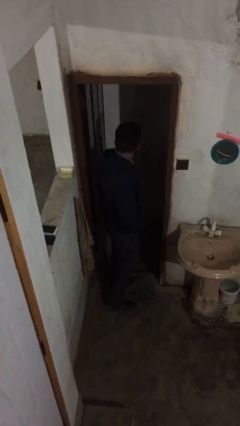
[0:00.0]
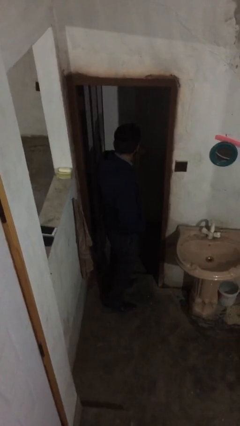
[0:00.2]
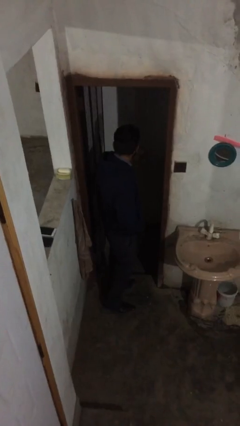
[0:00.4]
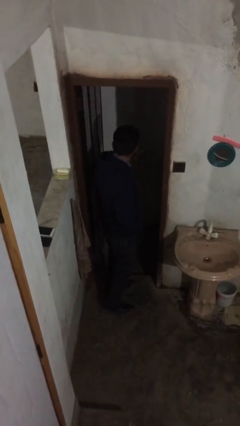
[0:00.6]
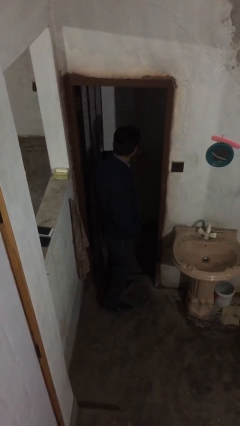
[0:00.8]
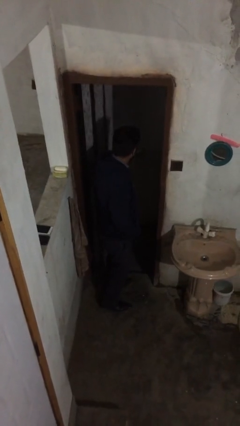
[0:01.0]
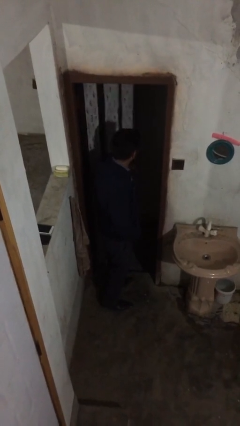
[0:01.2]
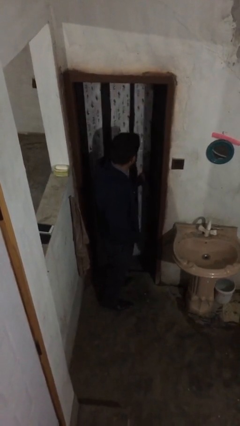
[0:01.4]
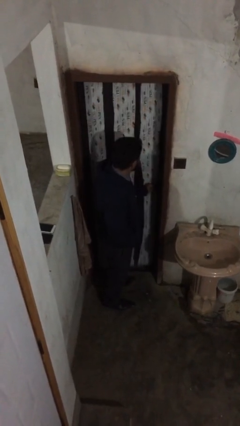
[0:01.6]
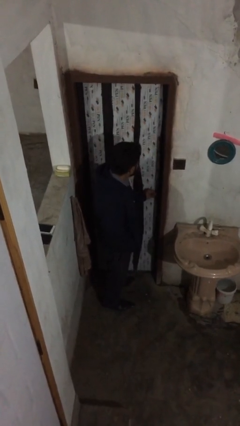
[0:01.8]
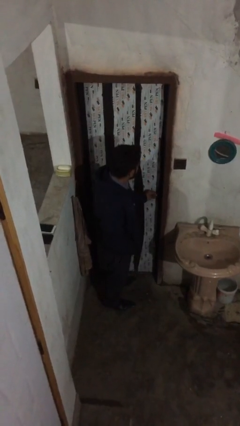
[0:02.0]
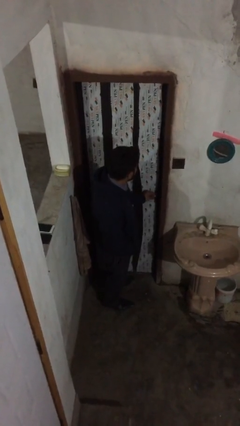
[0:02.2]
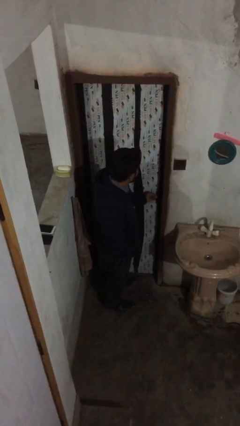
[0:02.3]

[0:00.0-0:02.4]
person closes facility door

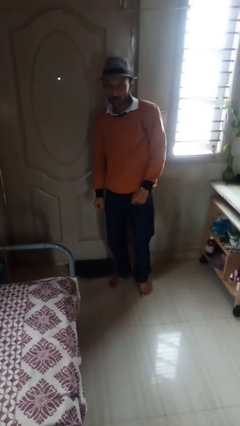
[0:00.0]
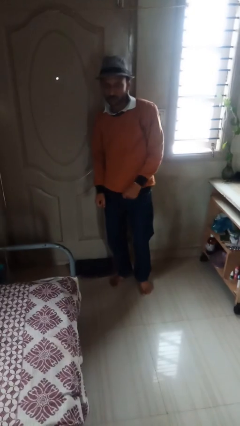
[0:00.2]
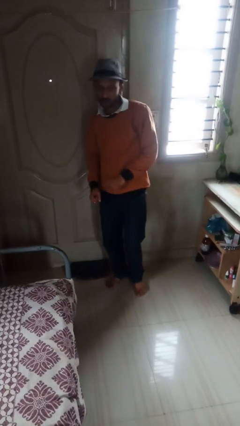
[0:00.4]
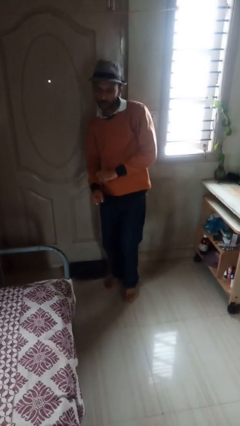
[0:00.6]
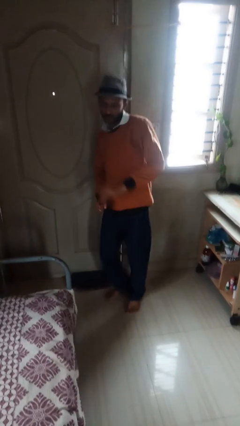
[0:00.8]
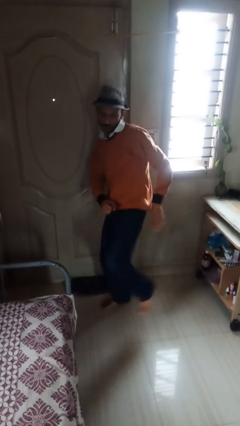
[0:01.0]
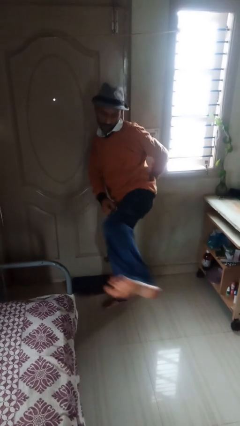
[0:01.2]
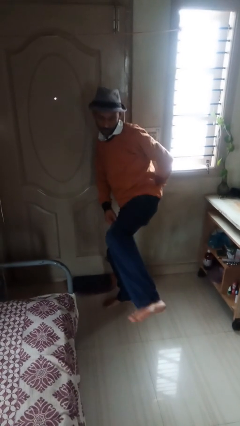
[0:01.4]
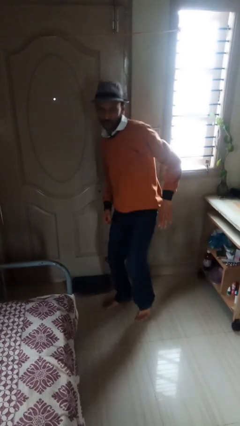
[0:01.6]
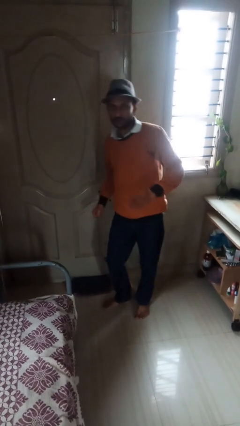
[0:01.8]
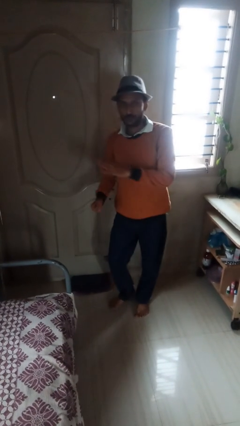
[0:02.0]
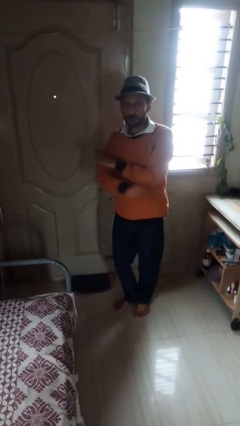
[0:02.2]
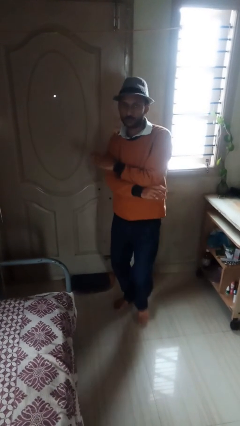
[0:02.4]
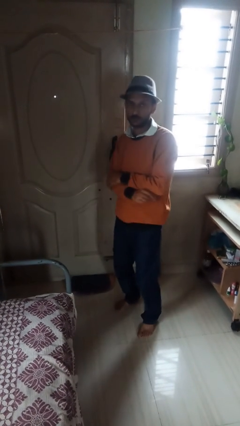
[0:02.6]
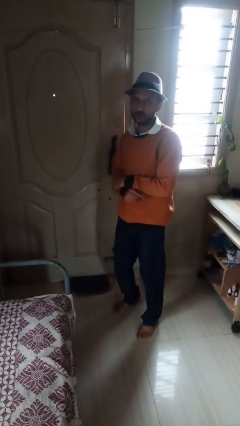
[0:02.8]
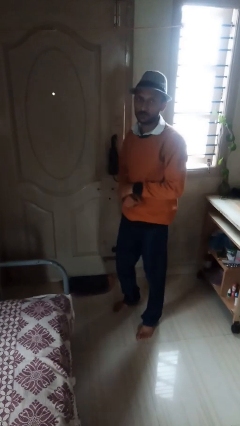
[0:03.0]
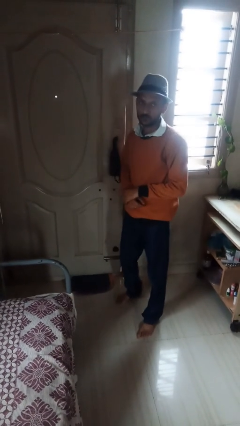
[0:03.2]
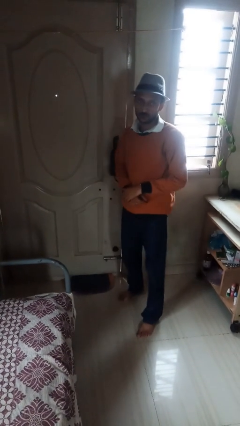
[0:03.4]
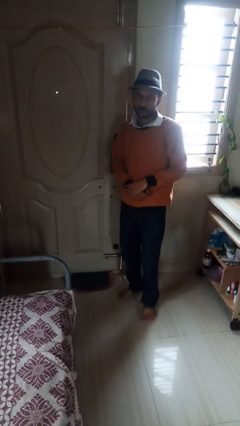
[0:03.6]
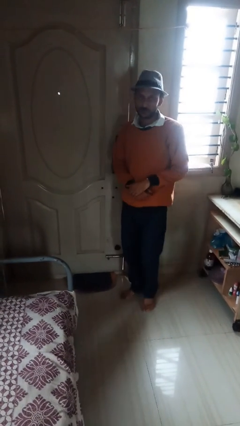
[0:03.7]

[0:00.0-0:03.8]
person karate kicks
